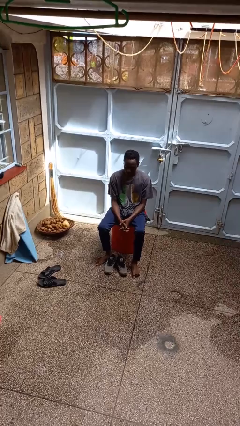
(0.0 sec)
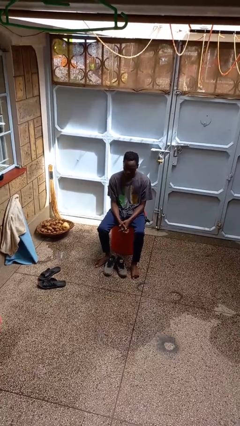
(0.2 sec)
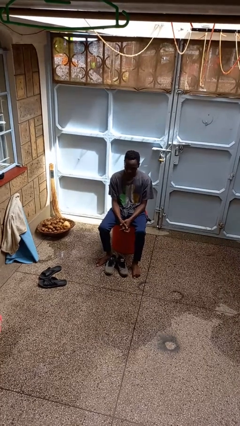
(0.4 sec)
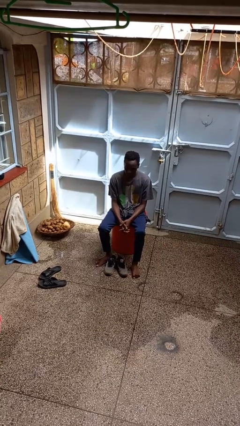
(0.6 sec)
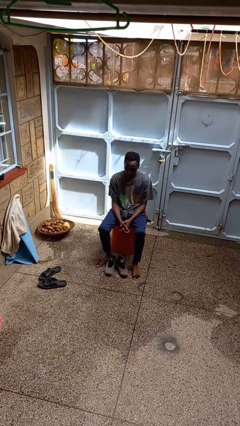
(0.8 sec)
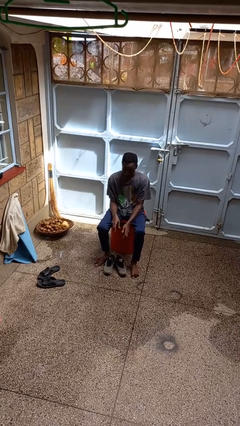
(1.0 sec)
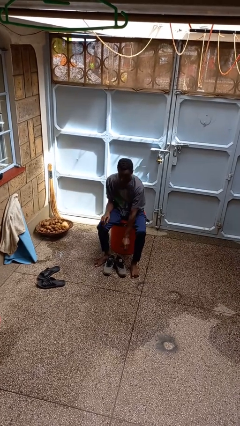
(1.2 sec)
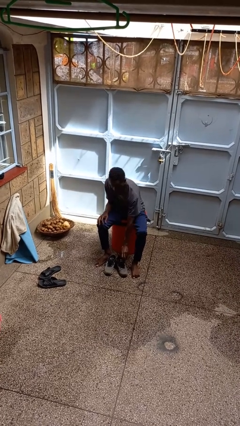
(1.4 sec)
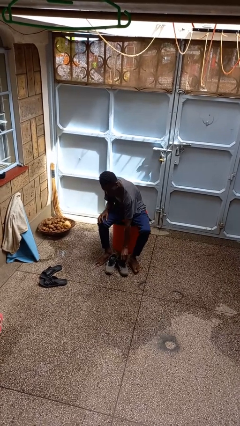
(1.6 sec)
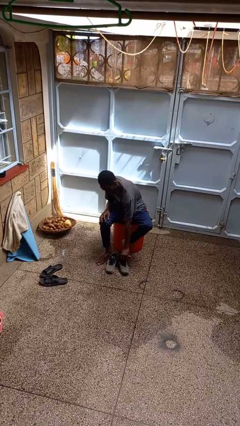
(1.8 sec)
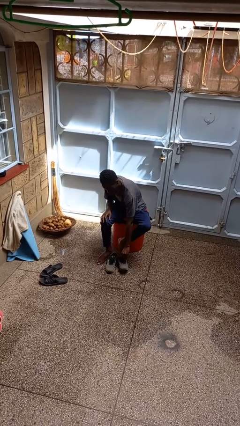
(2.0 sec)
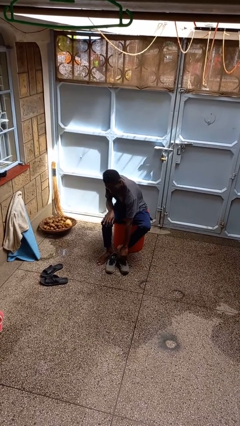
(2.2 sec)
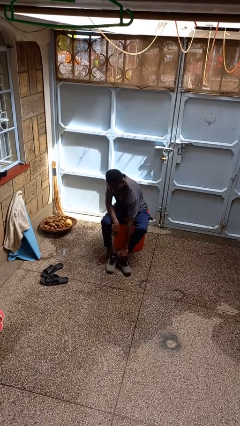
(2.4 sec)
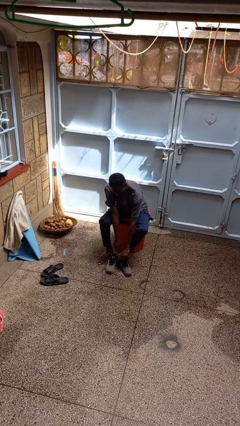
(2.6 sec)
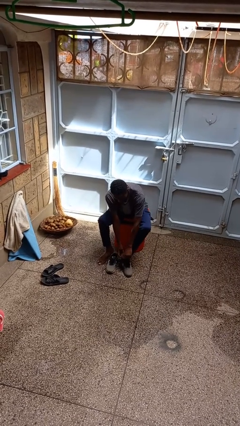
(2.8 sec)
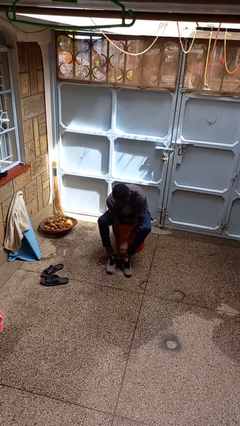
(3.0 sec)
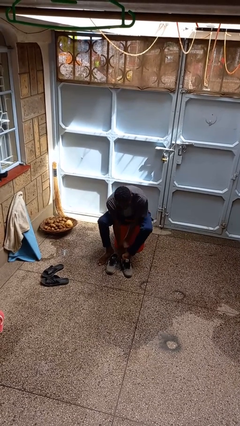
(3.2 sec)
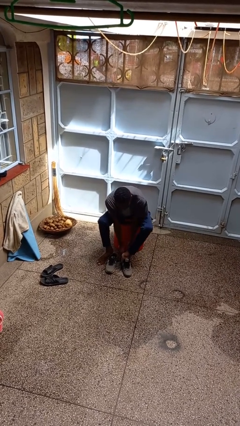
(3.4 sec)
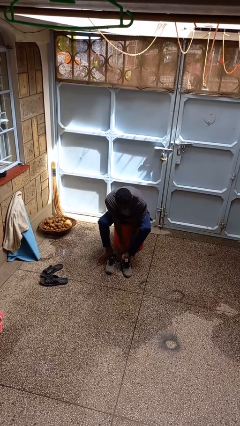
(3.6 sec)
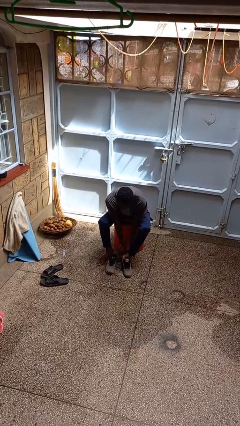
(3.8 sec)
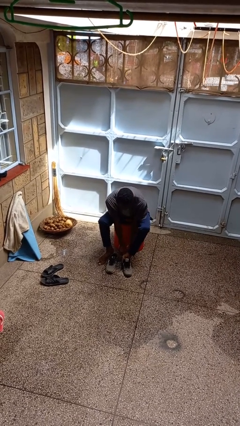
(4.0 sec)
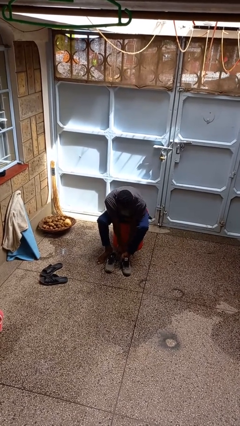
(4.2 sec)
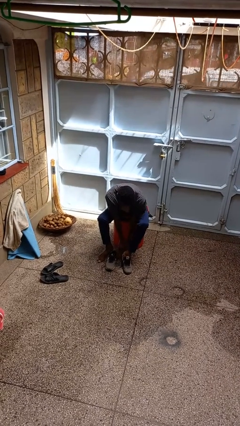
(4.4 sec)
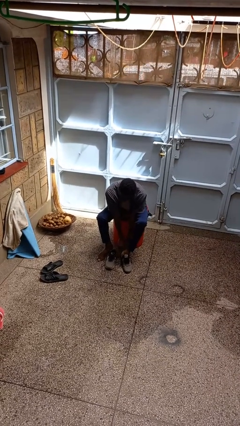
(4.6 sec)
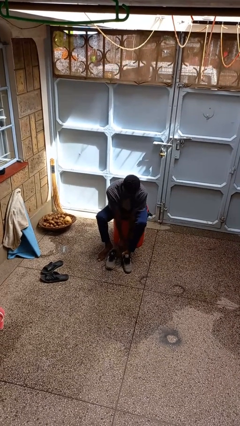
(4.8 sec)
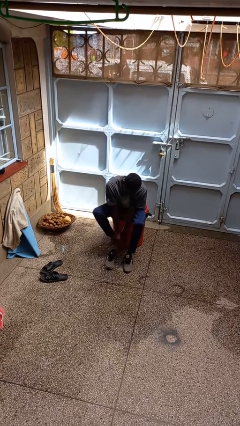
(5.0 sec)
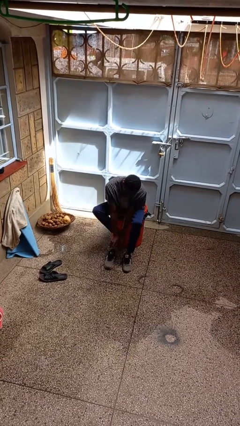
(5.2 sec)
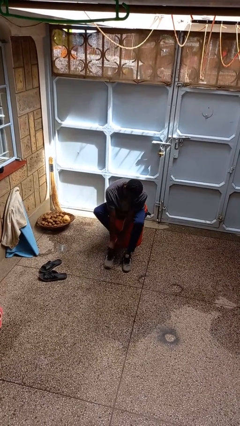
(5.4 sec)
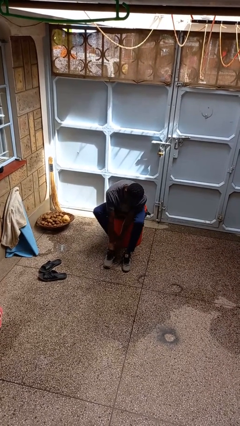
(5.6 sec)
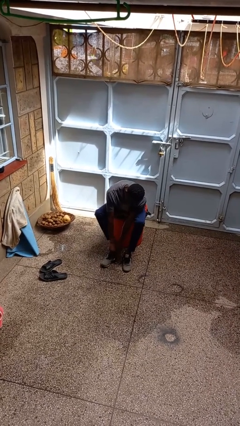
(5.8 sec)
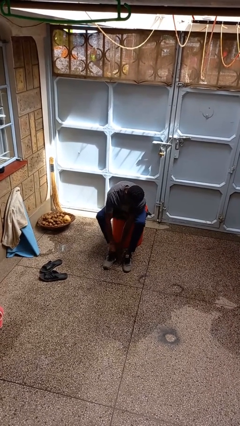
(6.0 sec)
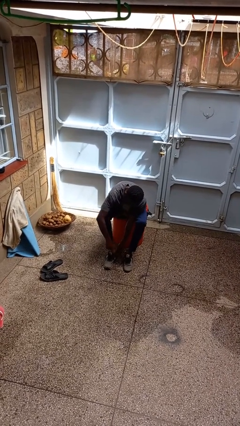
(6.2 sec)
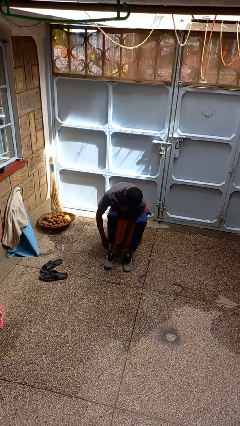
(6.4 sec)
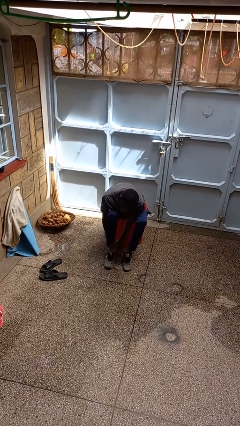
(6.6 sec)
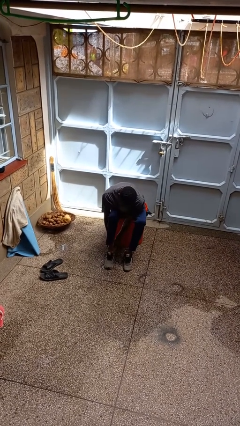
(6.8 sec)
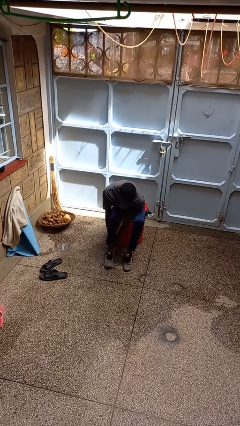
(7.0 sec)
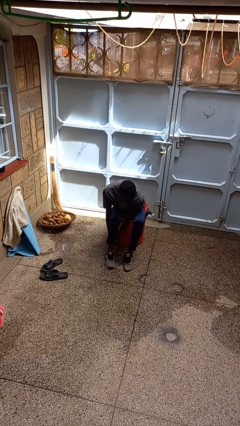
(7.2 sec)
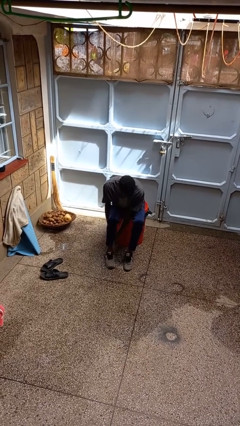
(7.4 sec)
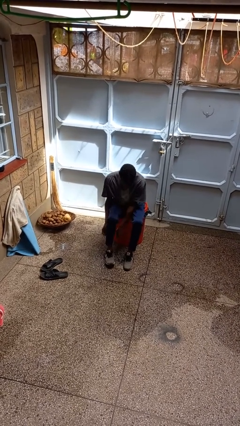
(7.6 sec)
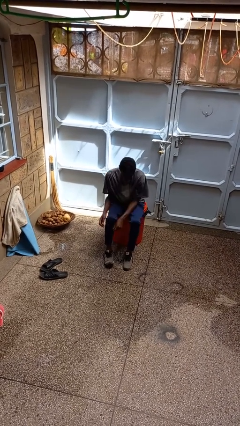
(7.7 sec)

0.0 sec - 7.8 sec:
person puts on shoes

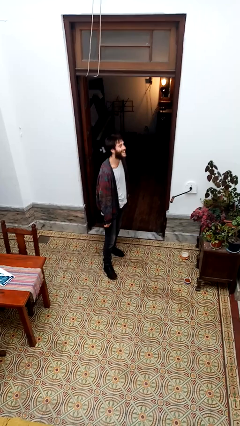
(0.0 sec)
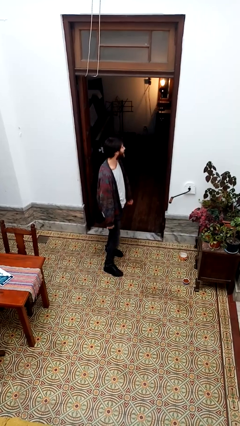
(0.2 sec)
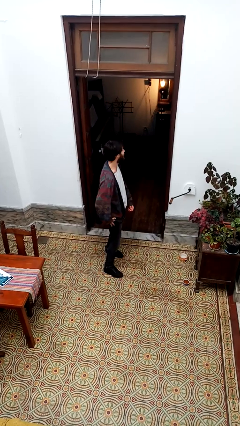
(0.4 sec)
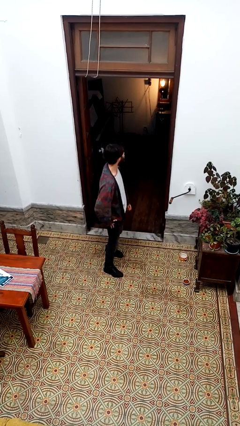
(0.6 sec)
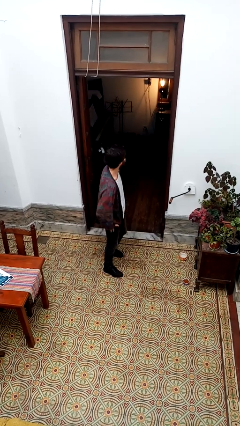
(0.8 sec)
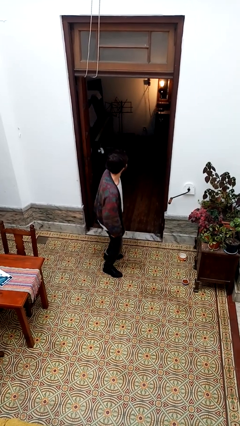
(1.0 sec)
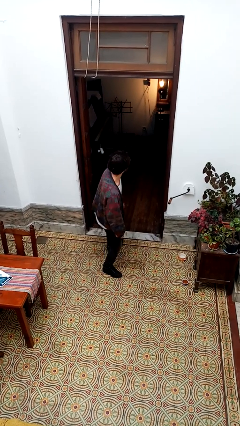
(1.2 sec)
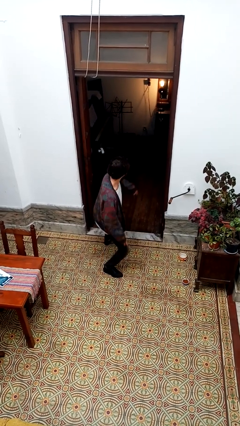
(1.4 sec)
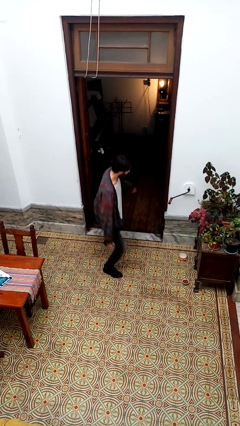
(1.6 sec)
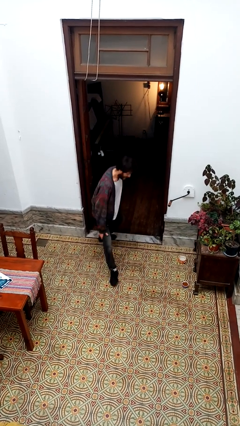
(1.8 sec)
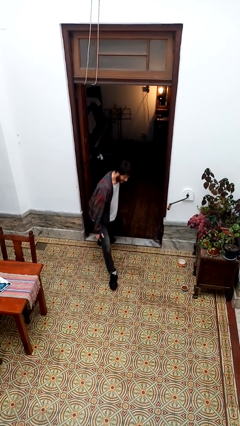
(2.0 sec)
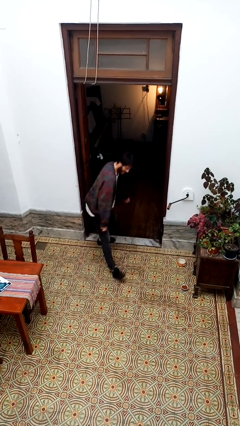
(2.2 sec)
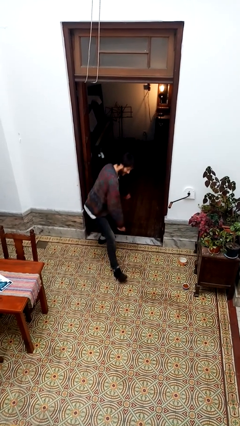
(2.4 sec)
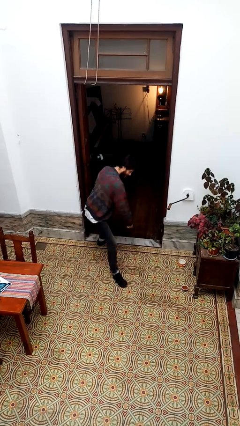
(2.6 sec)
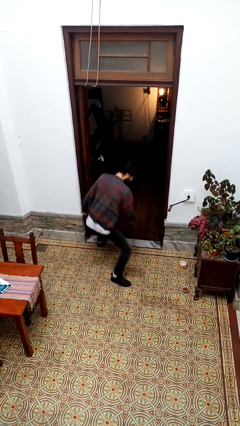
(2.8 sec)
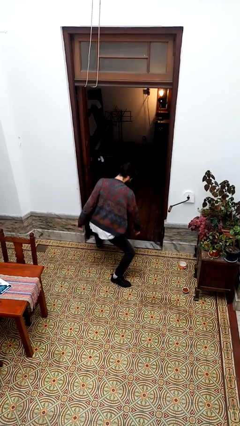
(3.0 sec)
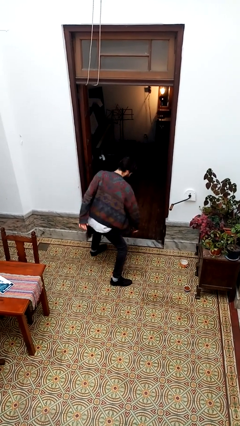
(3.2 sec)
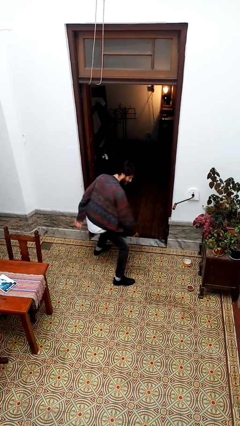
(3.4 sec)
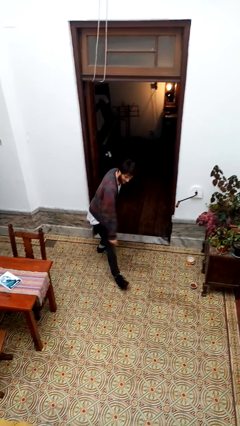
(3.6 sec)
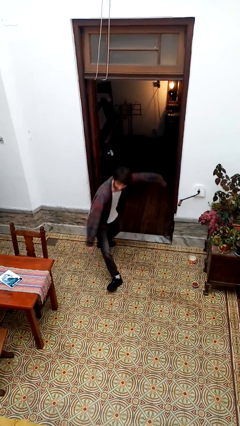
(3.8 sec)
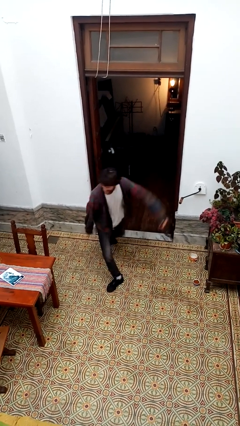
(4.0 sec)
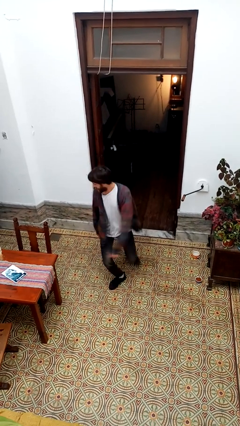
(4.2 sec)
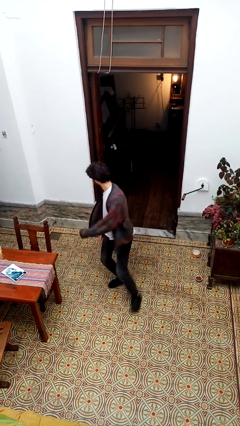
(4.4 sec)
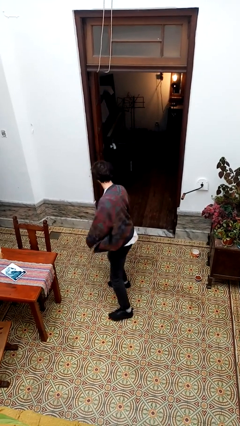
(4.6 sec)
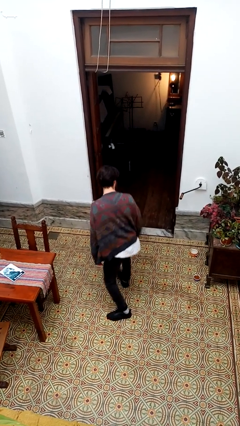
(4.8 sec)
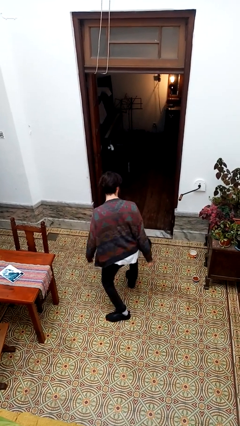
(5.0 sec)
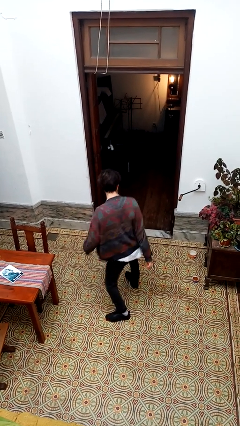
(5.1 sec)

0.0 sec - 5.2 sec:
person dances in place

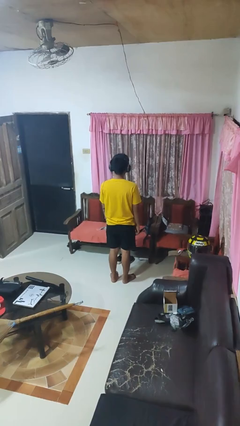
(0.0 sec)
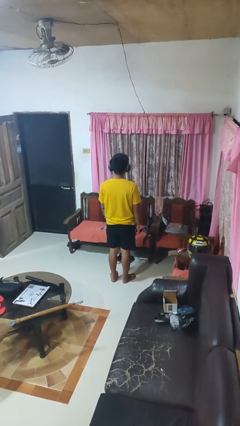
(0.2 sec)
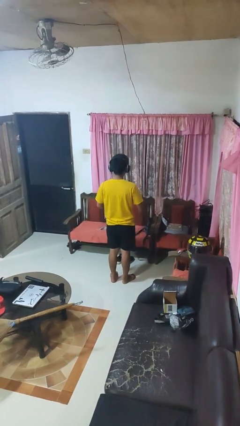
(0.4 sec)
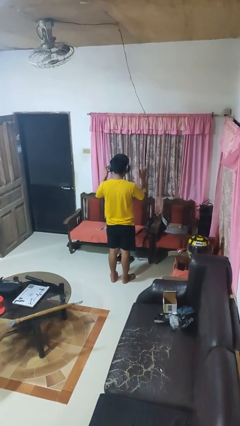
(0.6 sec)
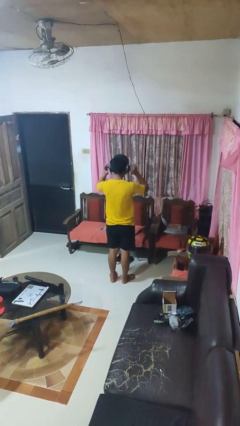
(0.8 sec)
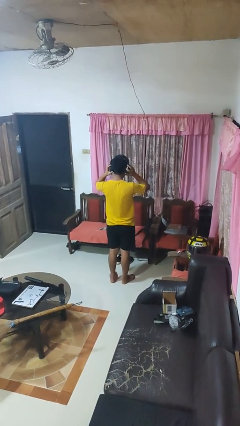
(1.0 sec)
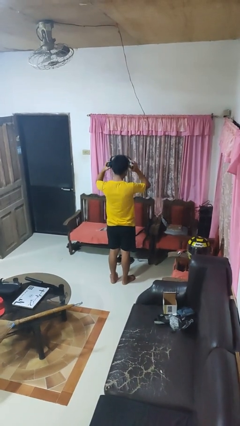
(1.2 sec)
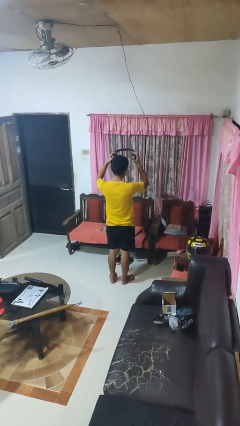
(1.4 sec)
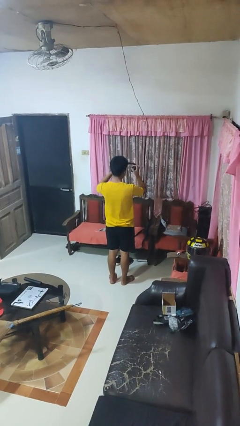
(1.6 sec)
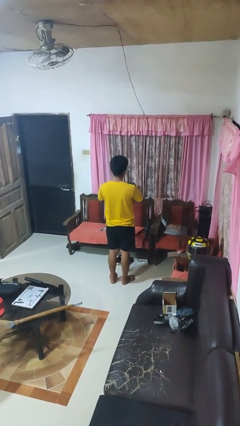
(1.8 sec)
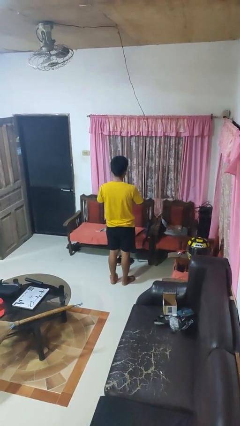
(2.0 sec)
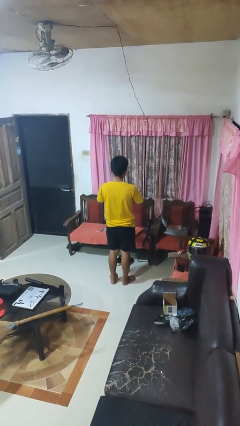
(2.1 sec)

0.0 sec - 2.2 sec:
person takes off headphones

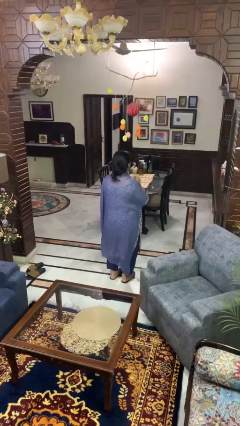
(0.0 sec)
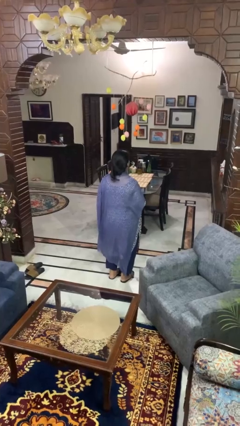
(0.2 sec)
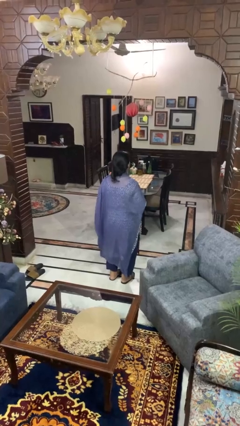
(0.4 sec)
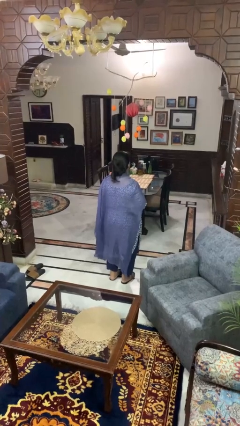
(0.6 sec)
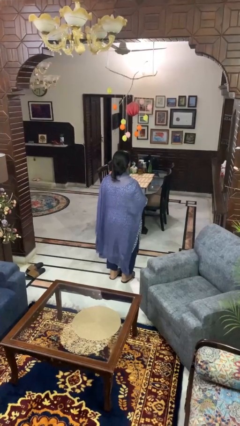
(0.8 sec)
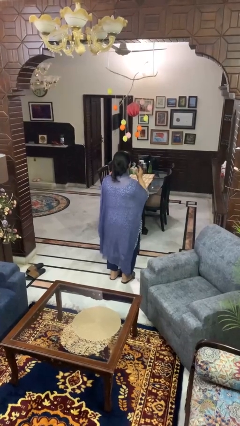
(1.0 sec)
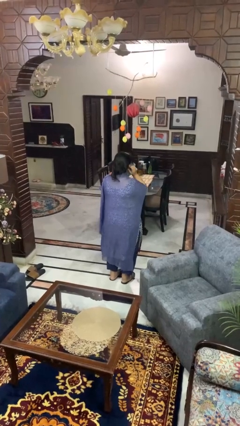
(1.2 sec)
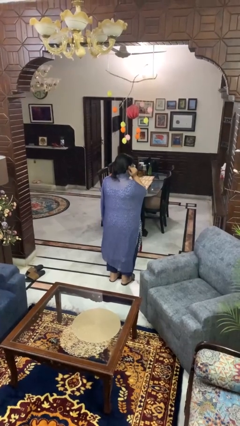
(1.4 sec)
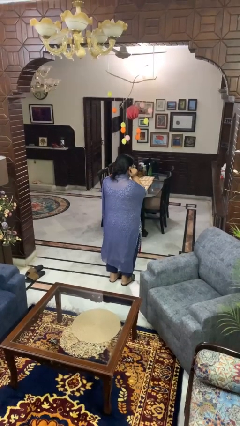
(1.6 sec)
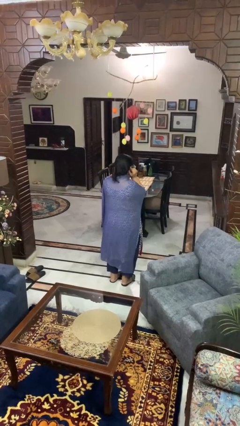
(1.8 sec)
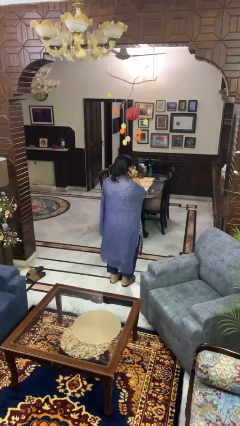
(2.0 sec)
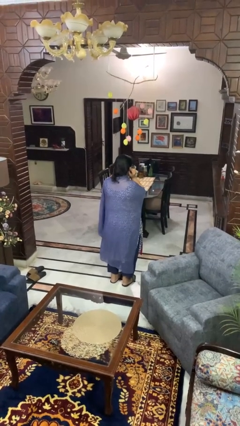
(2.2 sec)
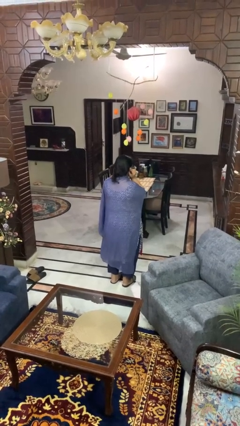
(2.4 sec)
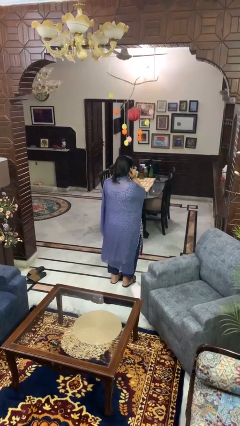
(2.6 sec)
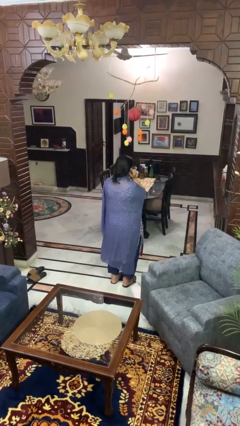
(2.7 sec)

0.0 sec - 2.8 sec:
person puts fingers in ear
